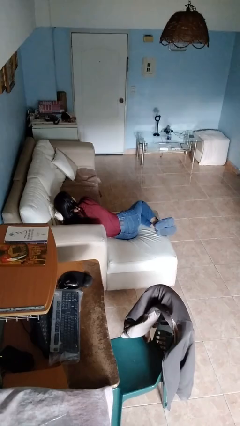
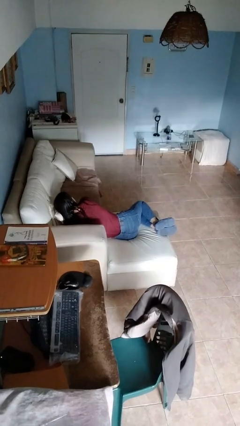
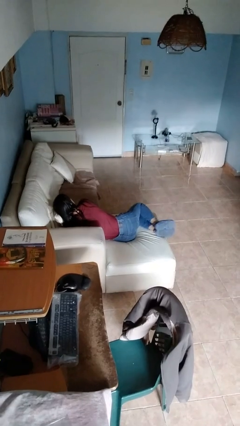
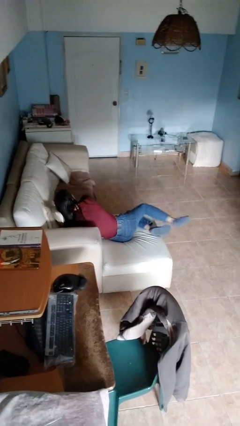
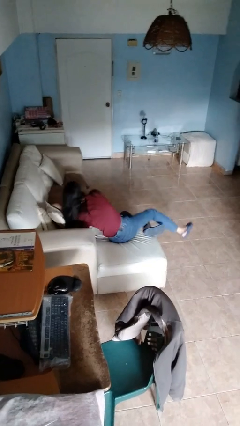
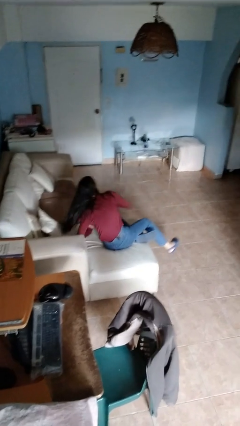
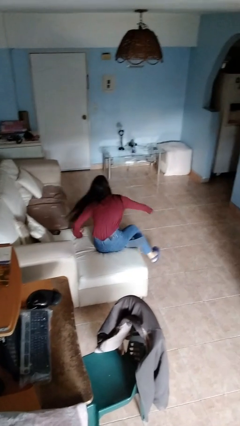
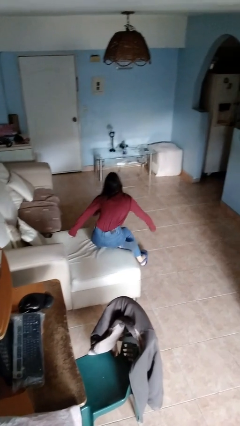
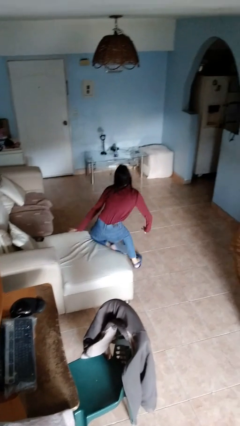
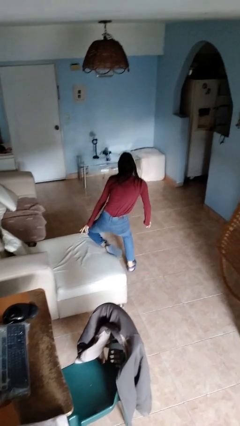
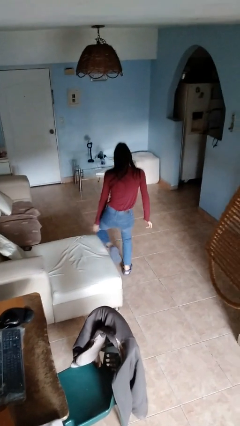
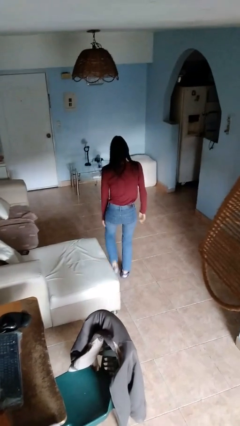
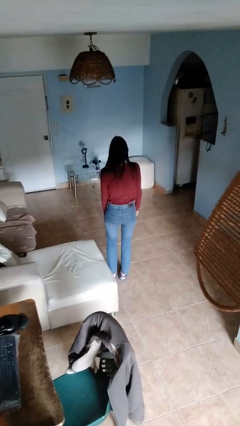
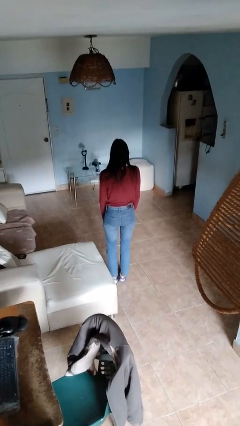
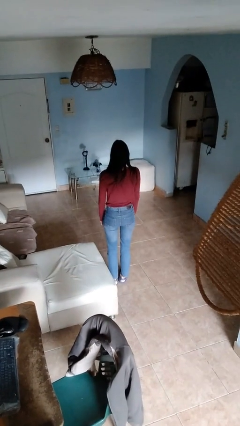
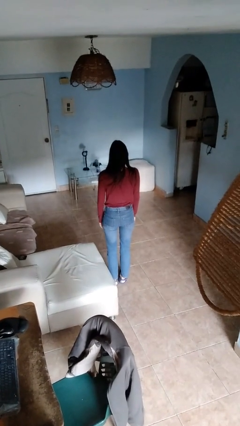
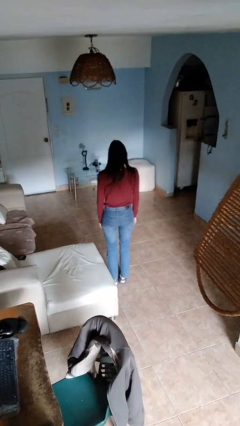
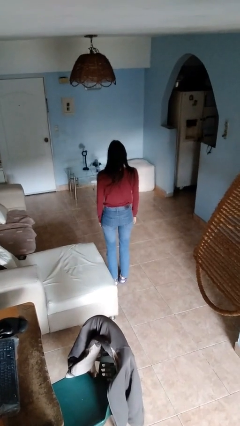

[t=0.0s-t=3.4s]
person stands up

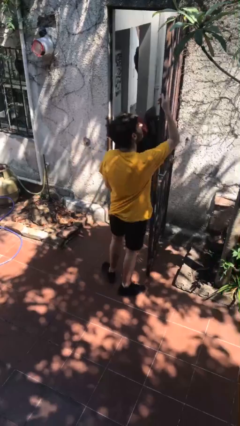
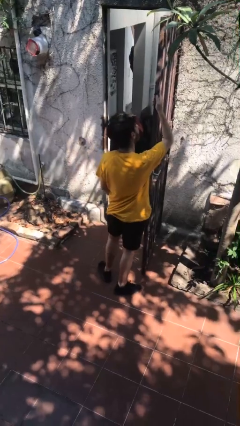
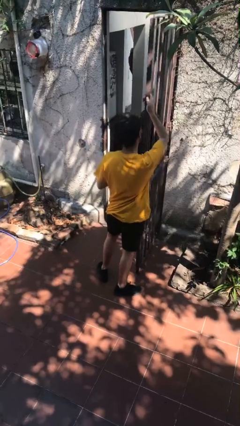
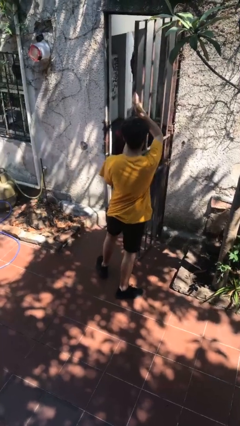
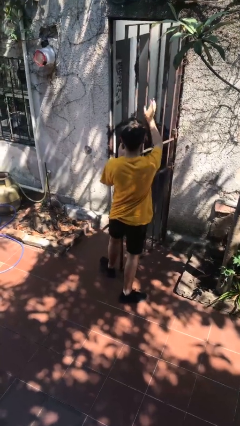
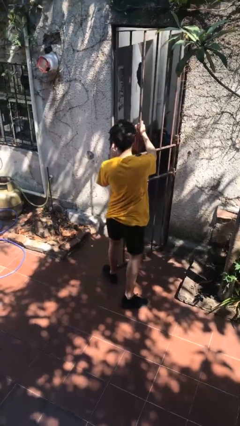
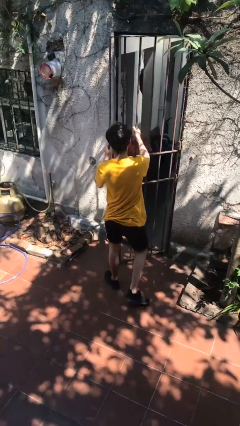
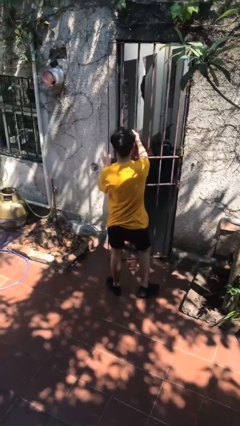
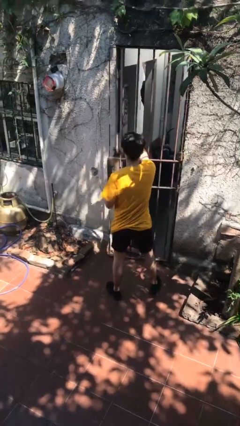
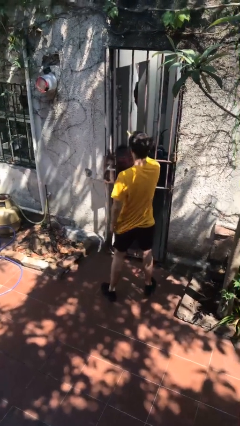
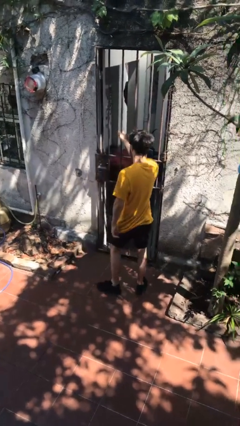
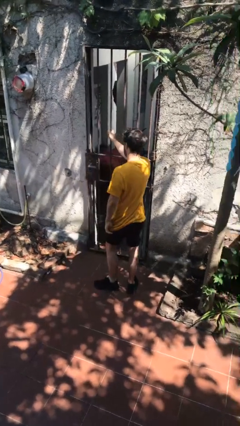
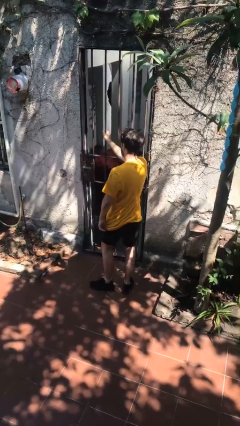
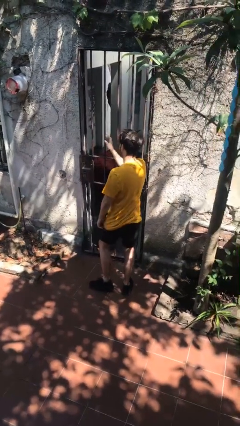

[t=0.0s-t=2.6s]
person closes facility door

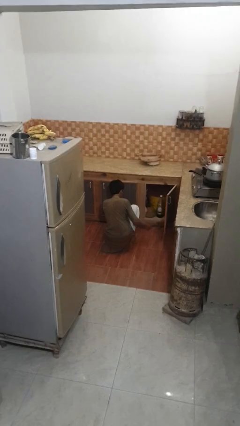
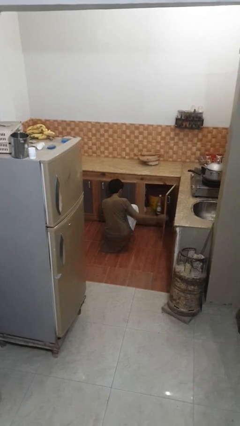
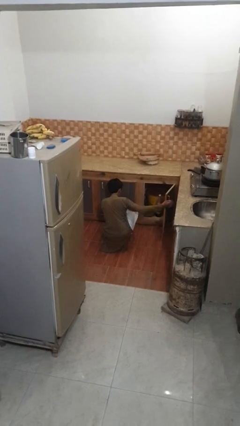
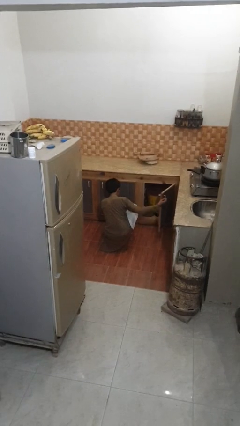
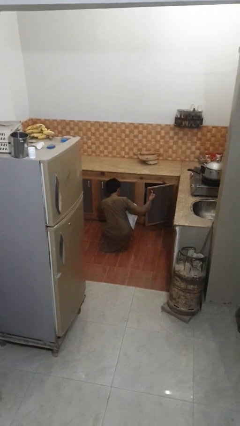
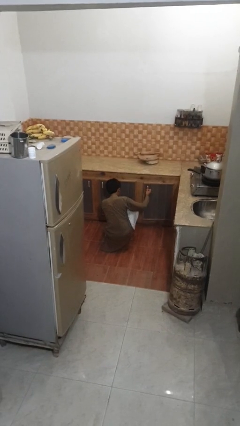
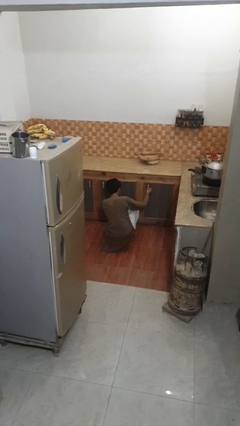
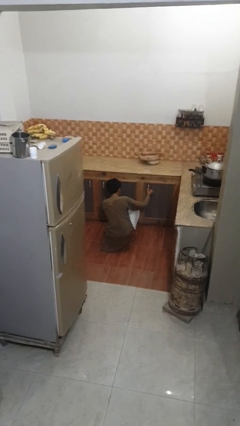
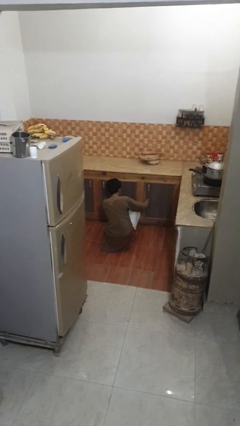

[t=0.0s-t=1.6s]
person closes kitchen drawer

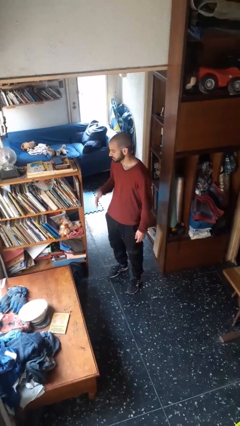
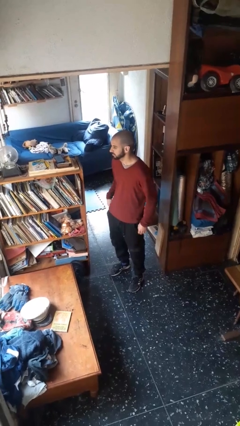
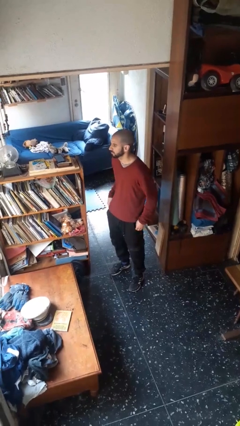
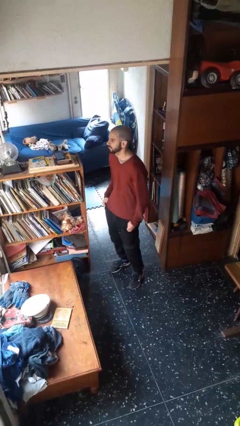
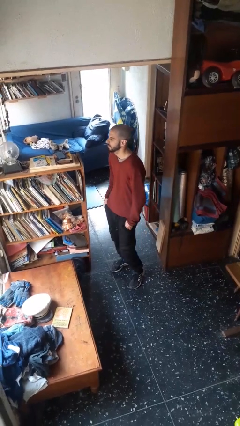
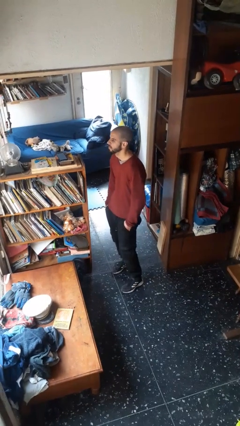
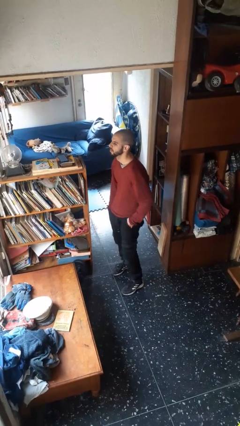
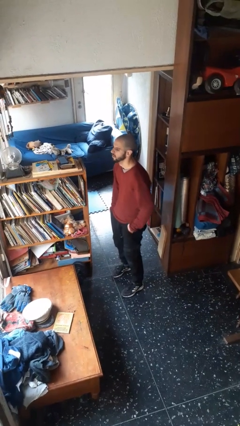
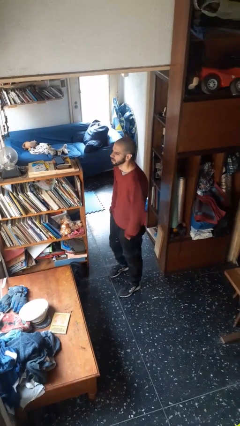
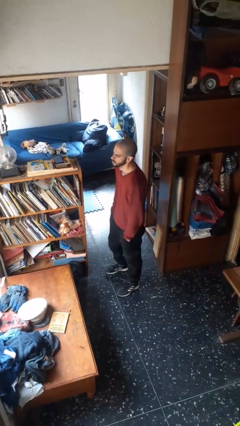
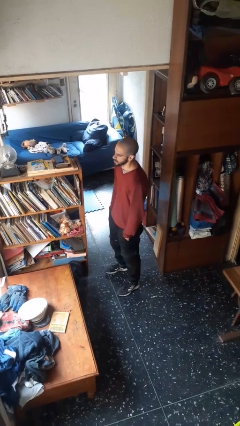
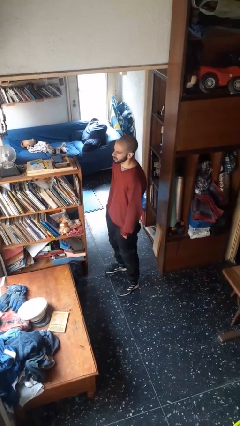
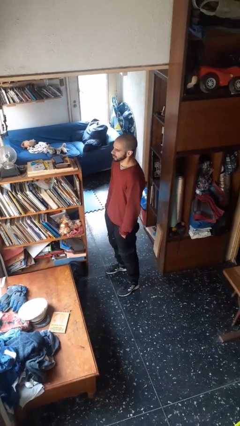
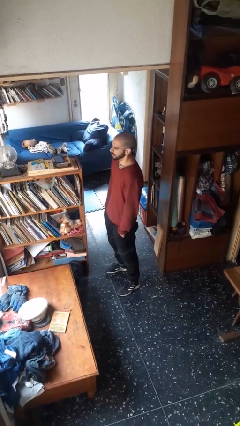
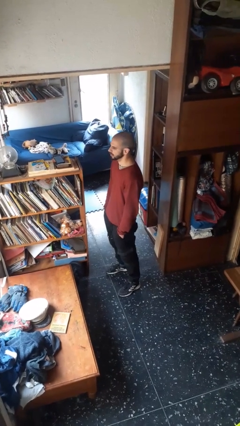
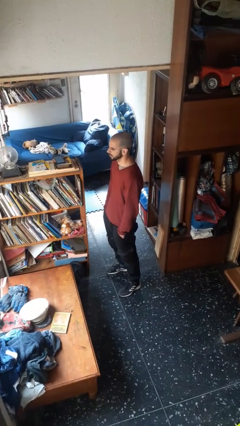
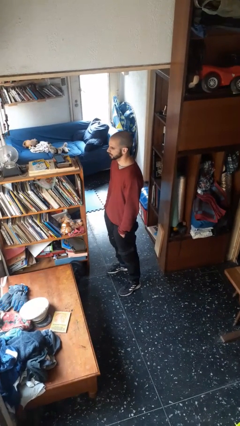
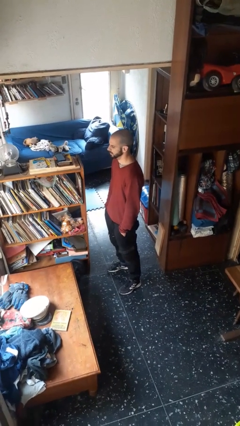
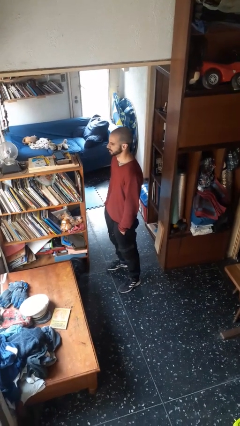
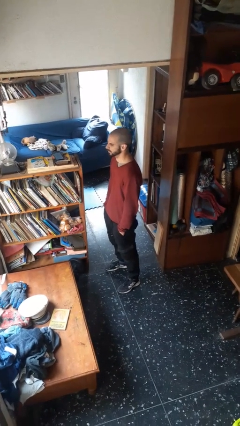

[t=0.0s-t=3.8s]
person puts hands in back pockets

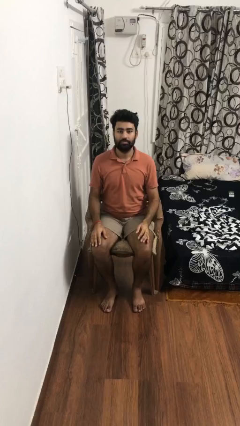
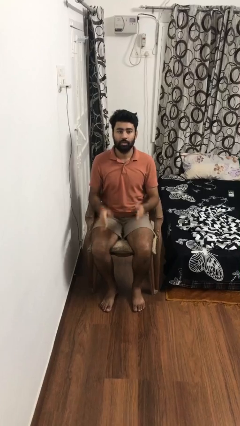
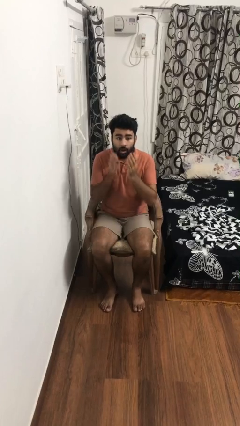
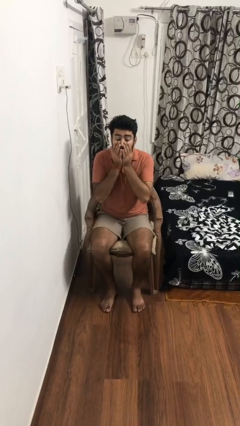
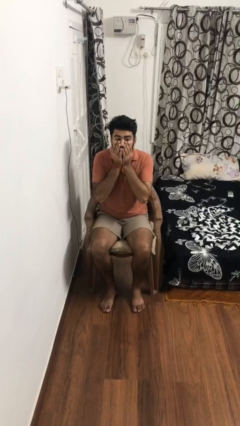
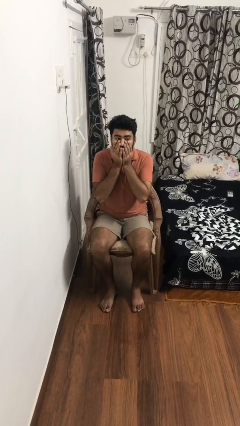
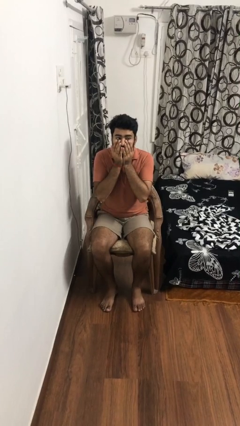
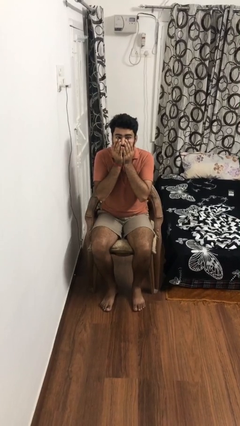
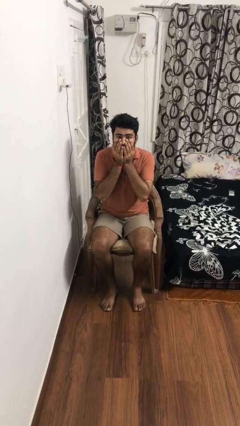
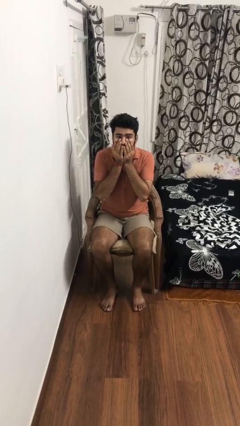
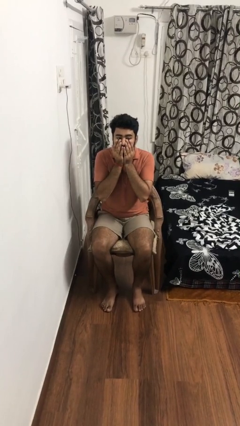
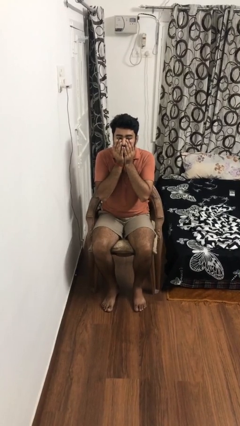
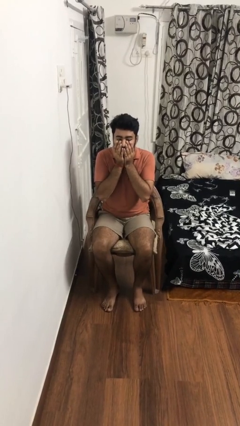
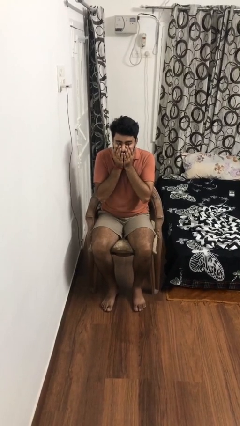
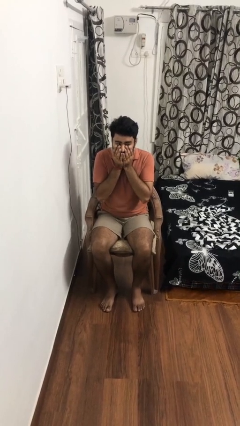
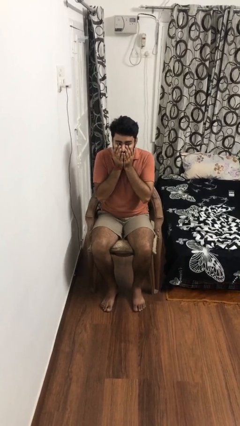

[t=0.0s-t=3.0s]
person covers face with hands

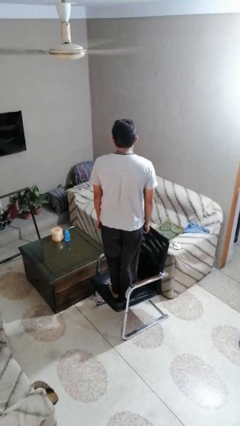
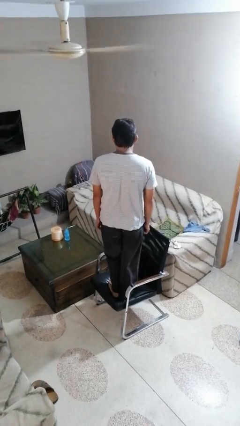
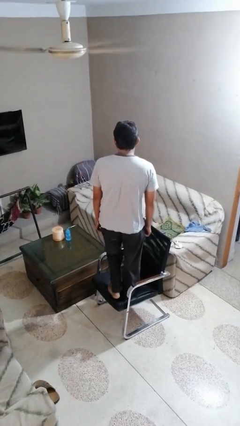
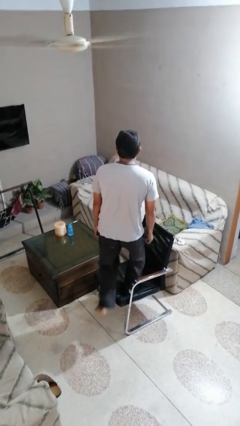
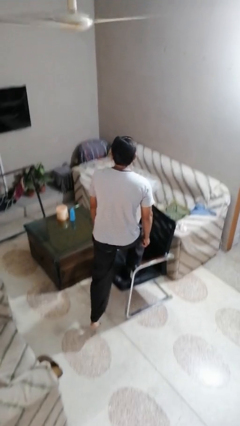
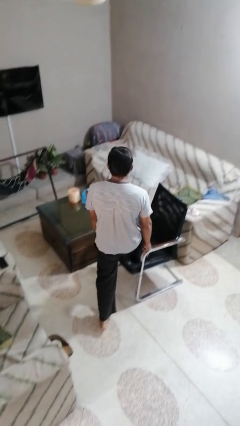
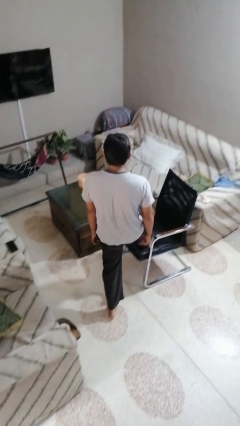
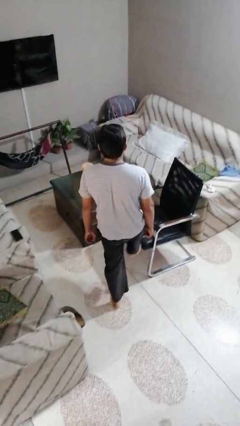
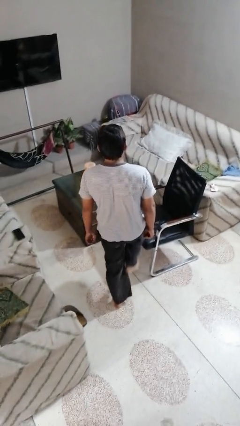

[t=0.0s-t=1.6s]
person climbs off chair

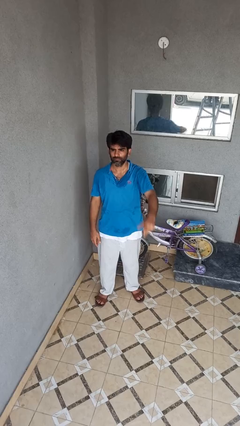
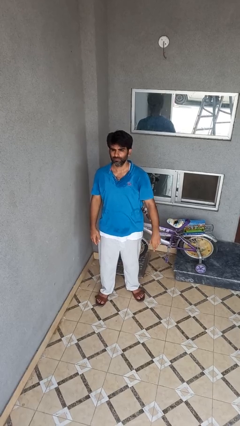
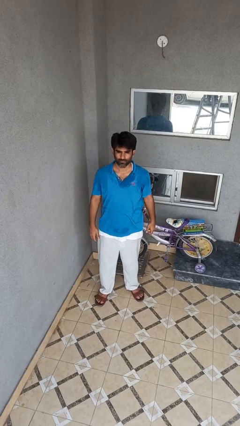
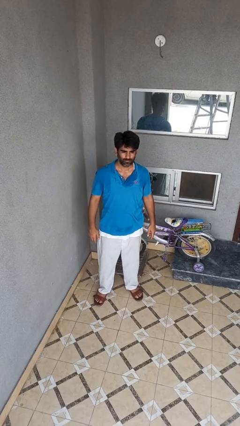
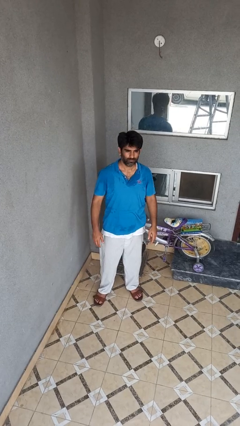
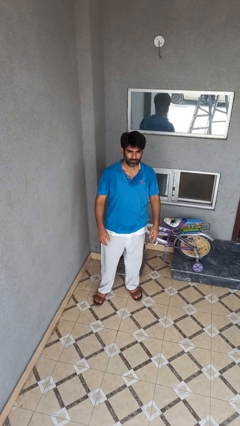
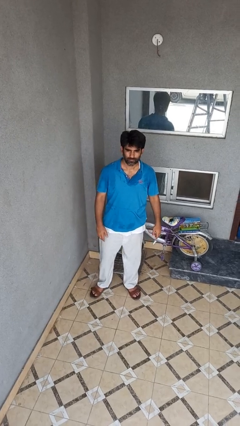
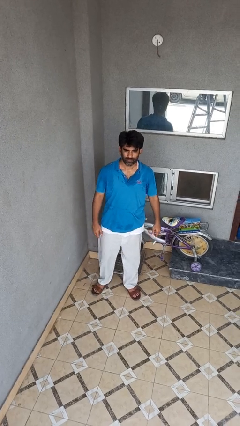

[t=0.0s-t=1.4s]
person gestures lower hand
